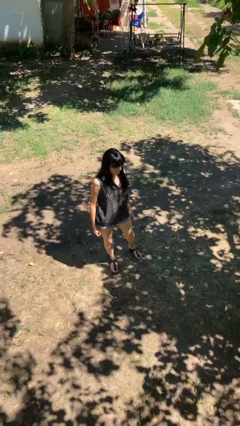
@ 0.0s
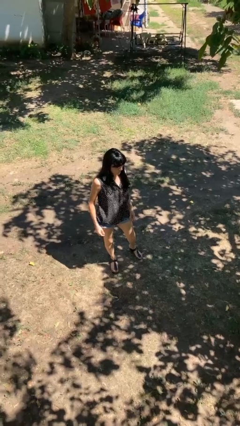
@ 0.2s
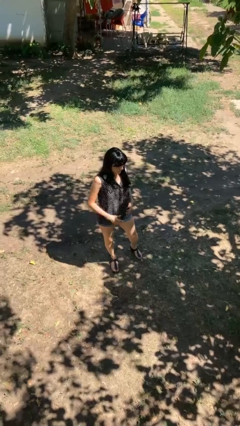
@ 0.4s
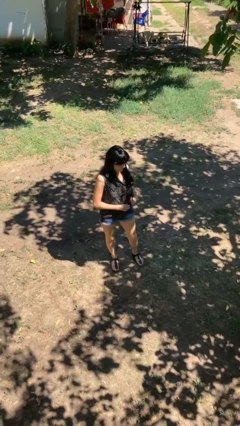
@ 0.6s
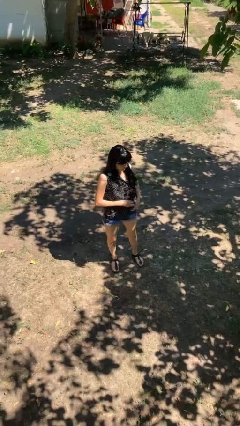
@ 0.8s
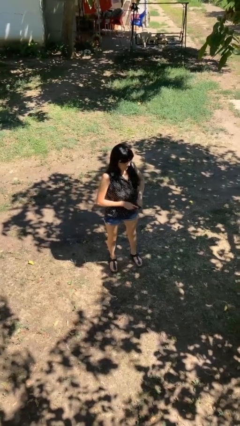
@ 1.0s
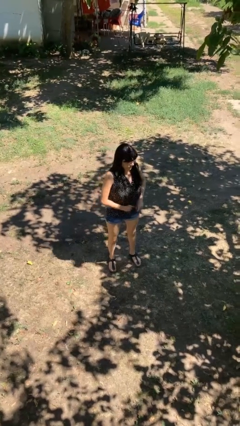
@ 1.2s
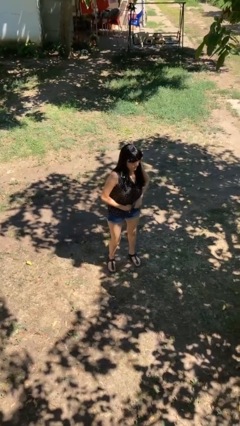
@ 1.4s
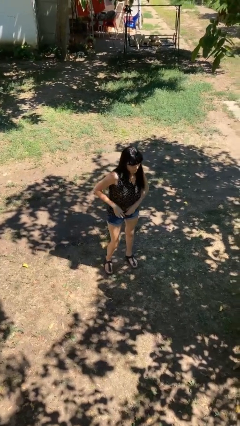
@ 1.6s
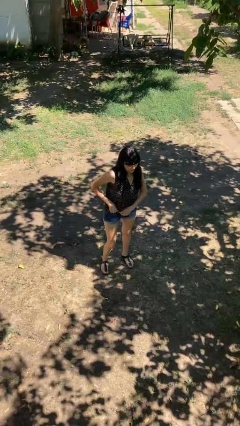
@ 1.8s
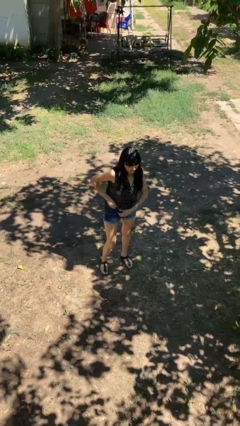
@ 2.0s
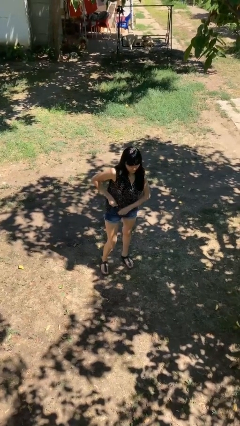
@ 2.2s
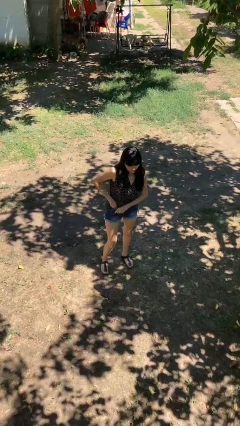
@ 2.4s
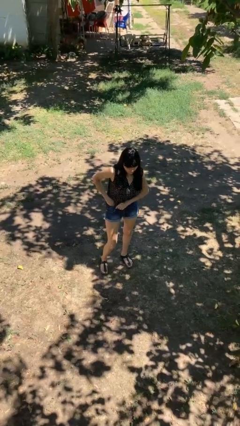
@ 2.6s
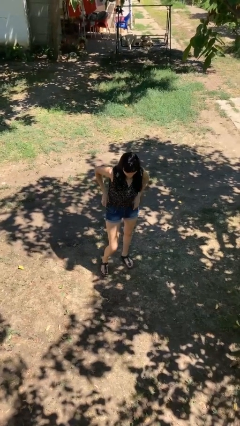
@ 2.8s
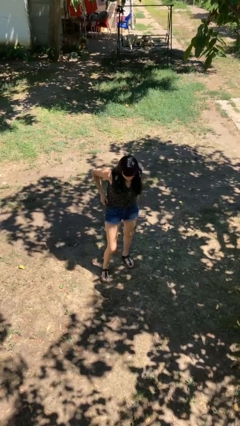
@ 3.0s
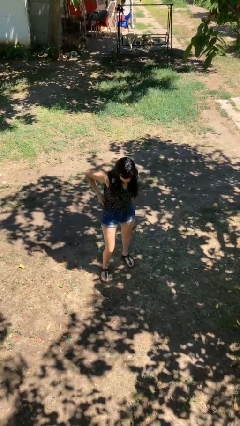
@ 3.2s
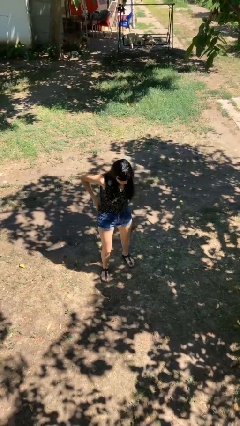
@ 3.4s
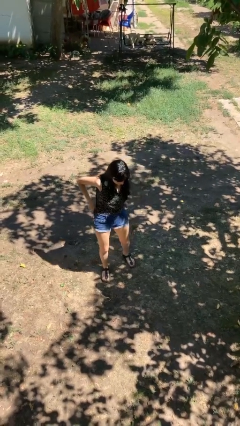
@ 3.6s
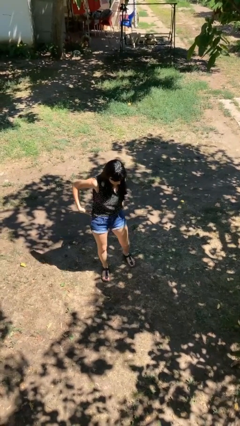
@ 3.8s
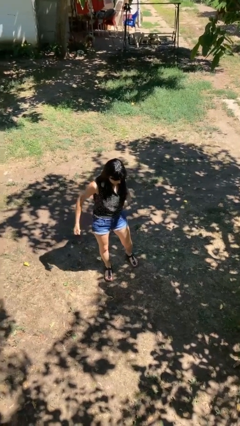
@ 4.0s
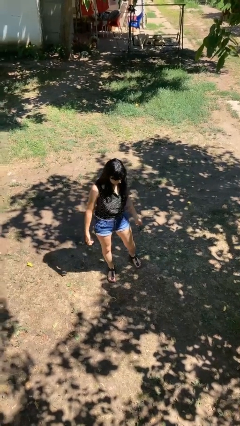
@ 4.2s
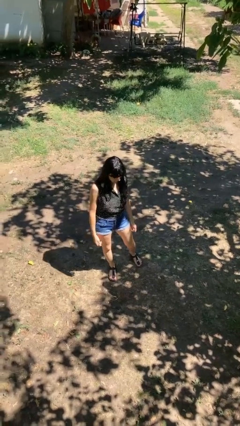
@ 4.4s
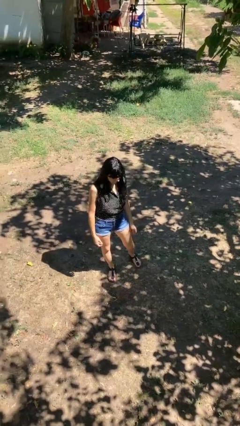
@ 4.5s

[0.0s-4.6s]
person tucks in shirt

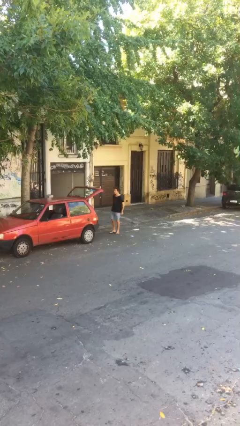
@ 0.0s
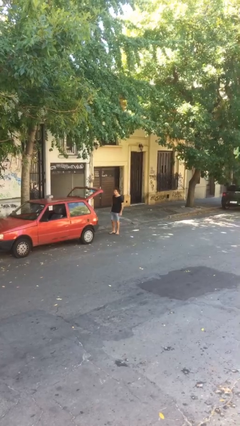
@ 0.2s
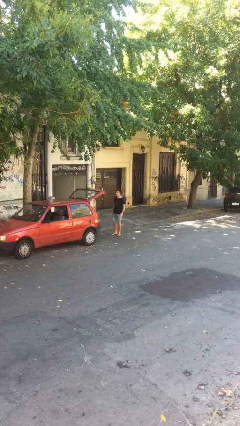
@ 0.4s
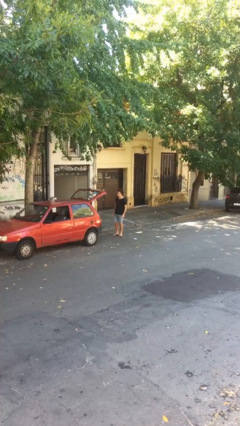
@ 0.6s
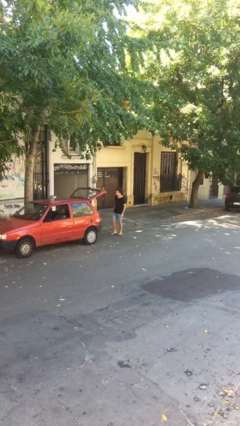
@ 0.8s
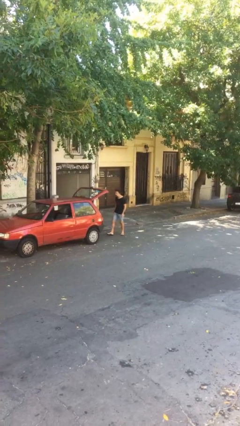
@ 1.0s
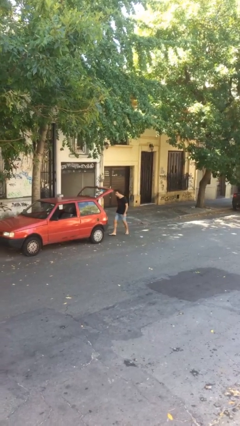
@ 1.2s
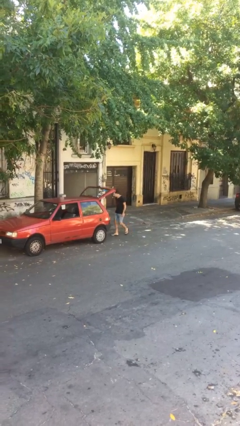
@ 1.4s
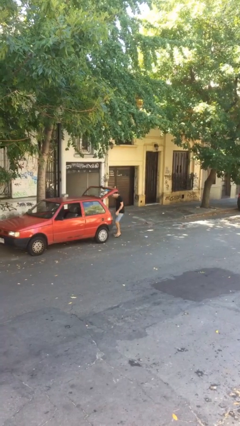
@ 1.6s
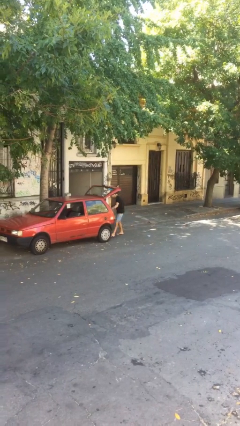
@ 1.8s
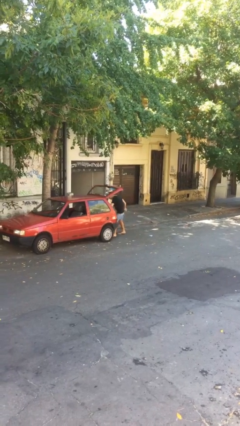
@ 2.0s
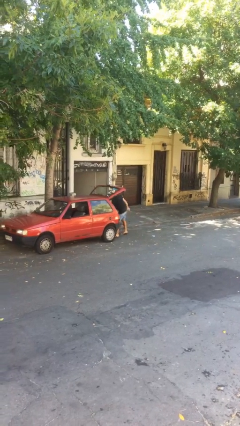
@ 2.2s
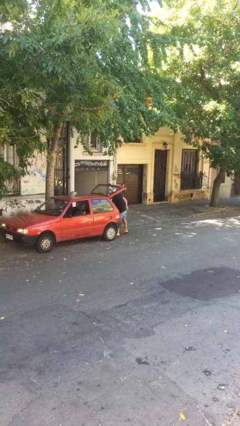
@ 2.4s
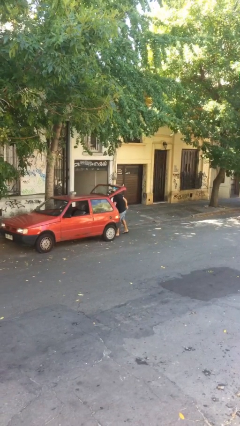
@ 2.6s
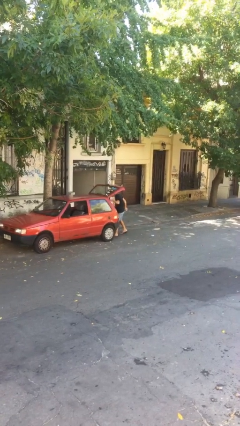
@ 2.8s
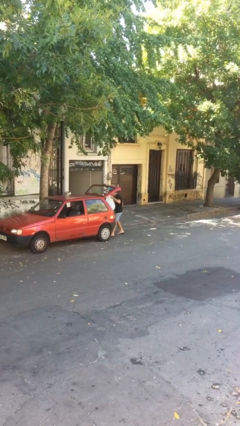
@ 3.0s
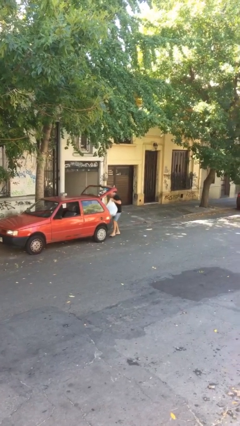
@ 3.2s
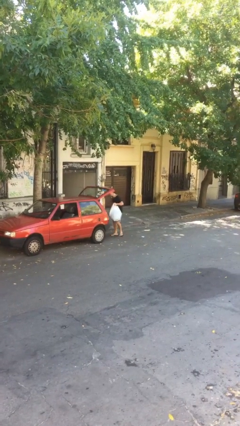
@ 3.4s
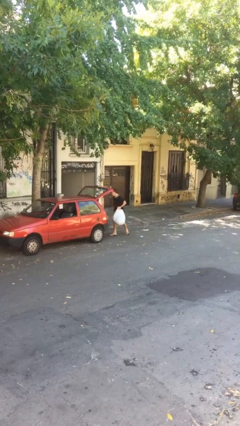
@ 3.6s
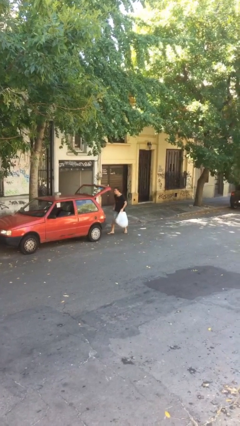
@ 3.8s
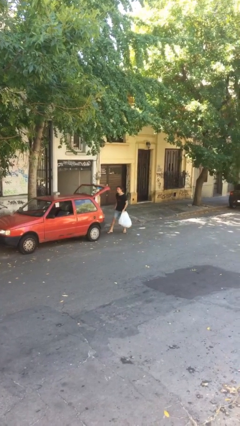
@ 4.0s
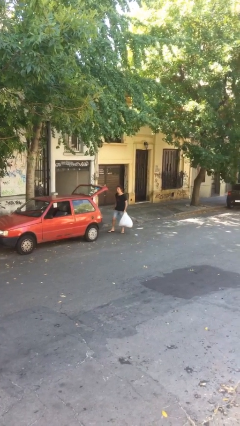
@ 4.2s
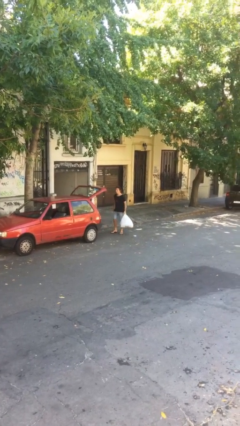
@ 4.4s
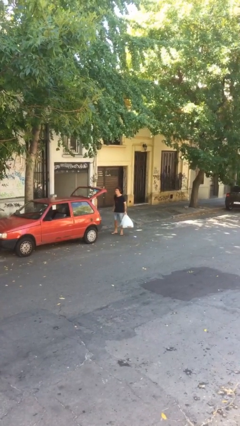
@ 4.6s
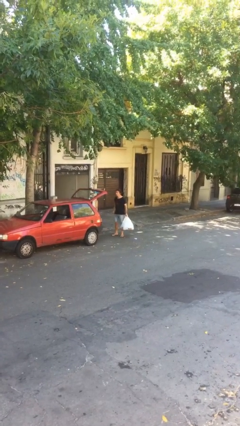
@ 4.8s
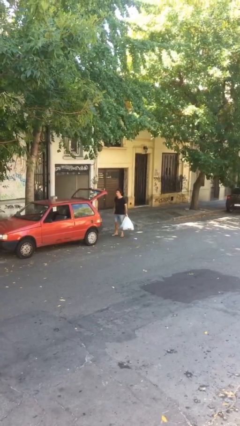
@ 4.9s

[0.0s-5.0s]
person unloads car

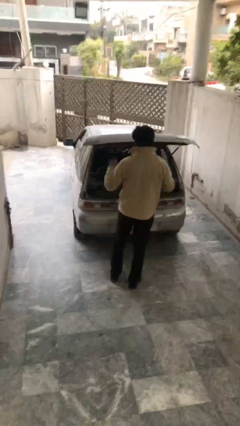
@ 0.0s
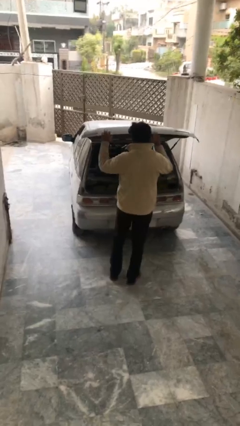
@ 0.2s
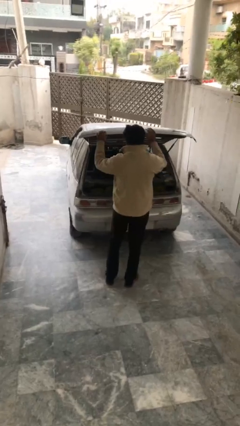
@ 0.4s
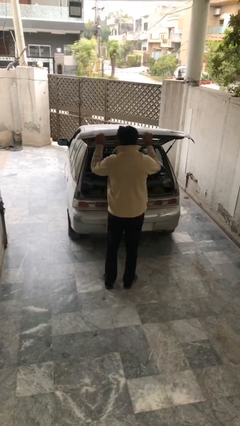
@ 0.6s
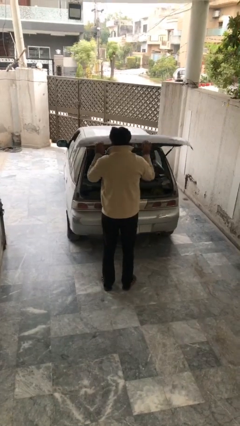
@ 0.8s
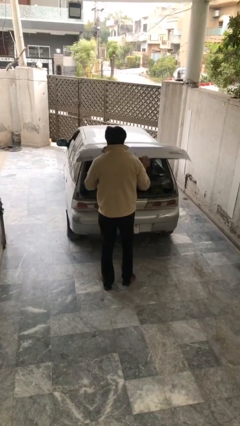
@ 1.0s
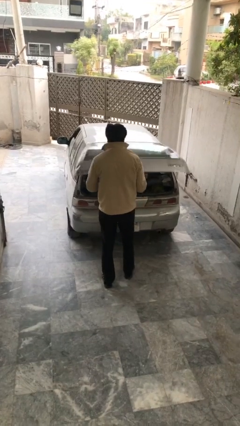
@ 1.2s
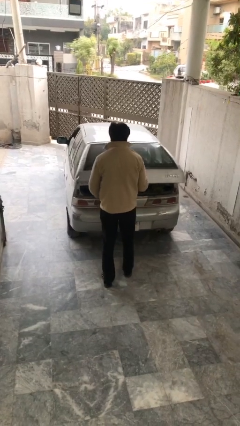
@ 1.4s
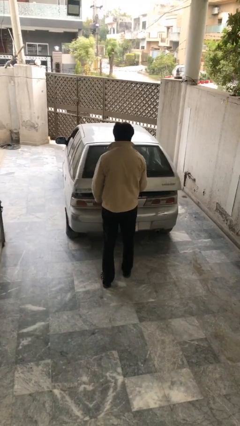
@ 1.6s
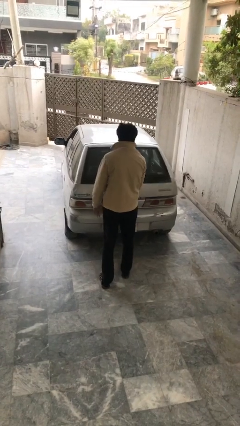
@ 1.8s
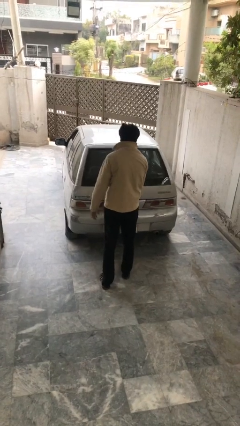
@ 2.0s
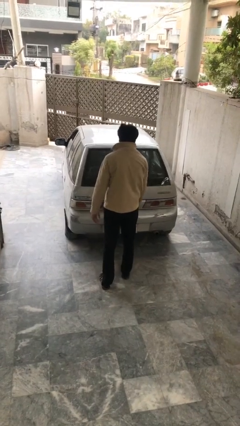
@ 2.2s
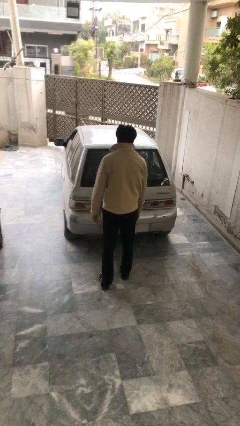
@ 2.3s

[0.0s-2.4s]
person closes car trunk

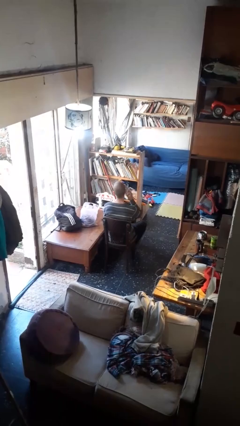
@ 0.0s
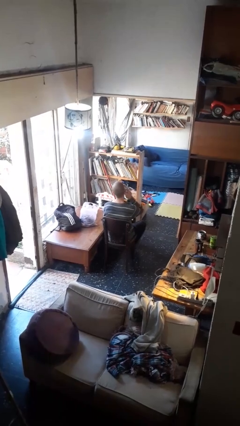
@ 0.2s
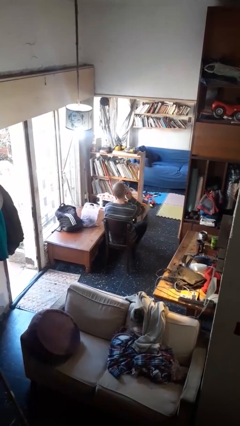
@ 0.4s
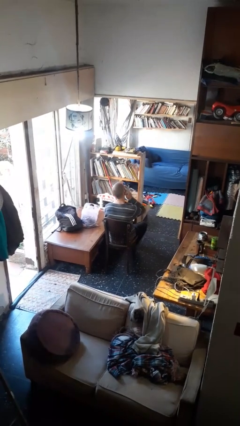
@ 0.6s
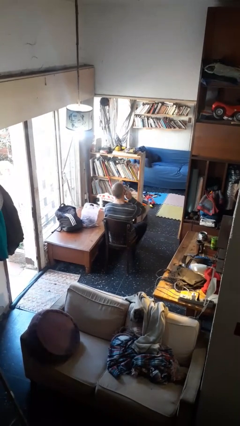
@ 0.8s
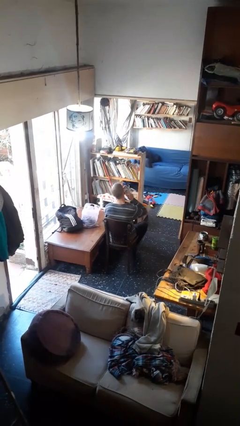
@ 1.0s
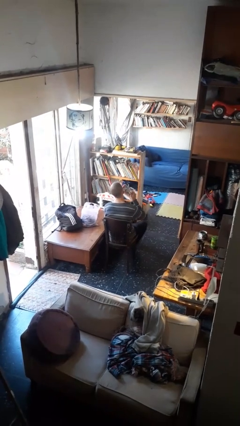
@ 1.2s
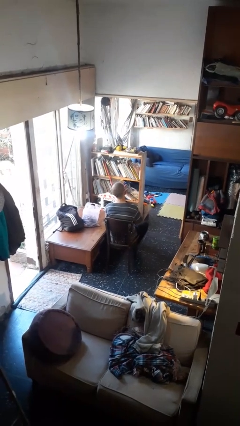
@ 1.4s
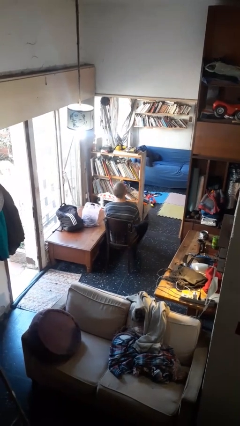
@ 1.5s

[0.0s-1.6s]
person takes off earrings

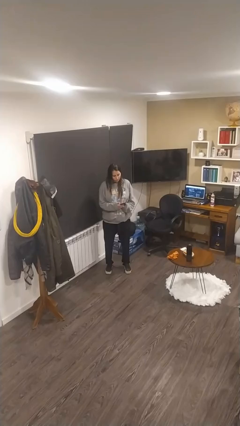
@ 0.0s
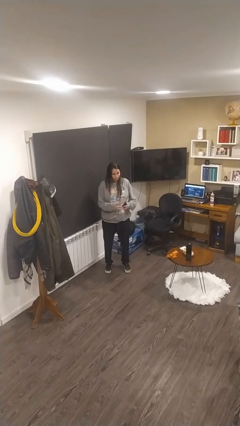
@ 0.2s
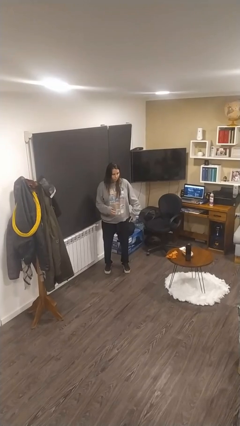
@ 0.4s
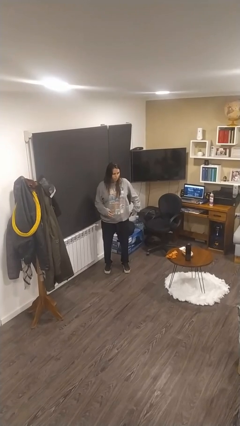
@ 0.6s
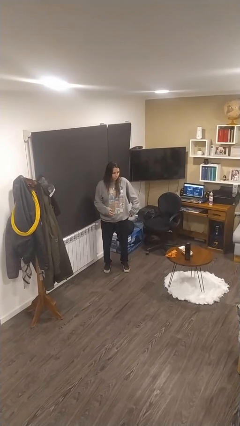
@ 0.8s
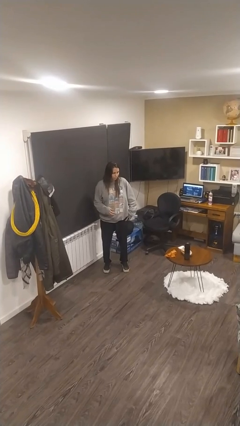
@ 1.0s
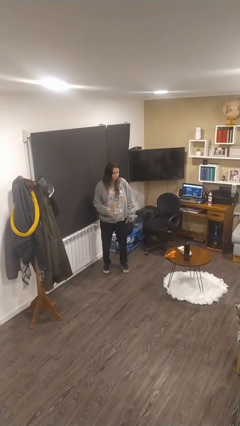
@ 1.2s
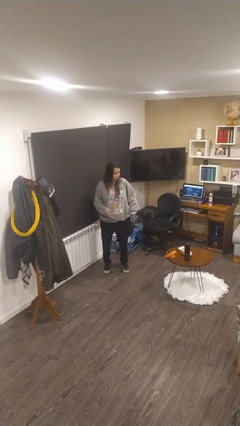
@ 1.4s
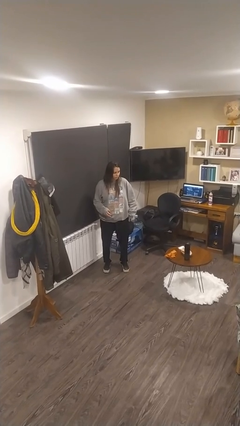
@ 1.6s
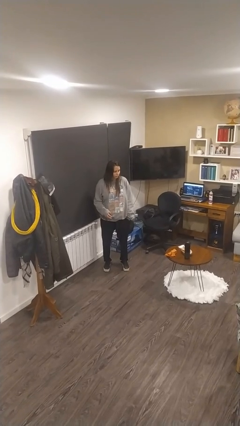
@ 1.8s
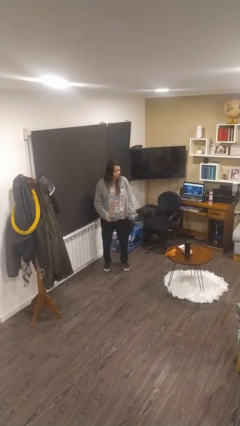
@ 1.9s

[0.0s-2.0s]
person puts phone into pocket

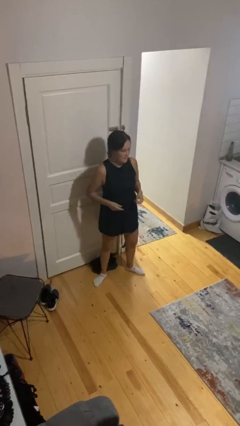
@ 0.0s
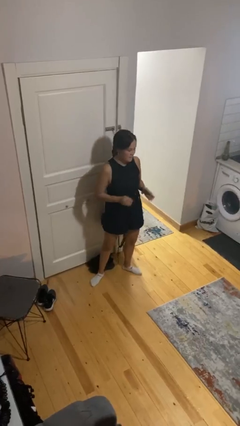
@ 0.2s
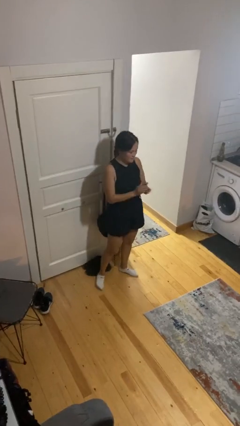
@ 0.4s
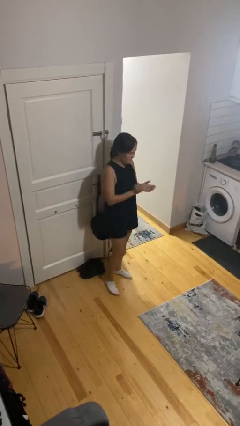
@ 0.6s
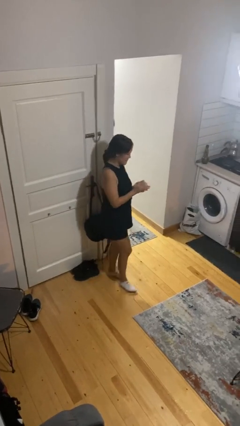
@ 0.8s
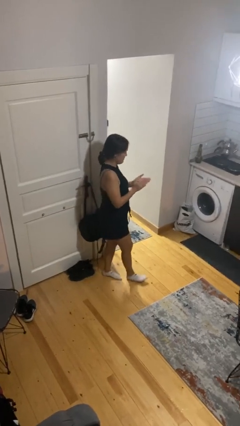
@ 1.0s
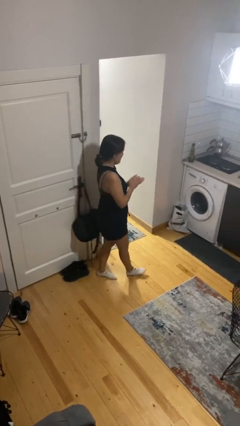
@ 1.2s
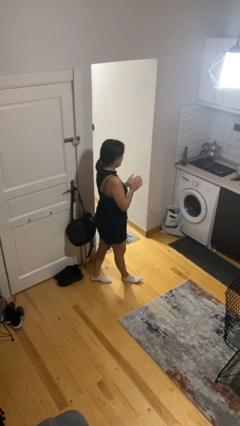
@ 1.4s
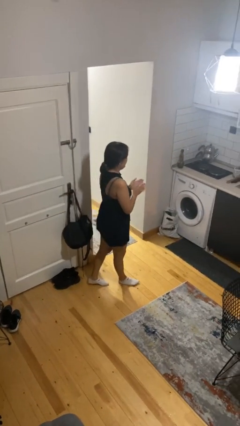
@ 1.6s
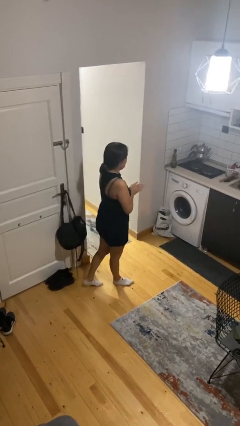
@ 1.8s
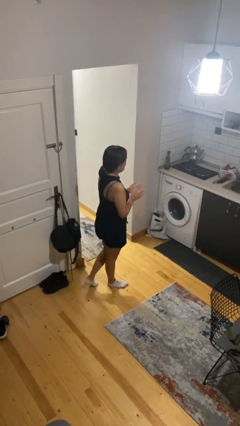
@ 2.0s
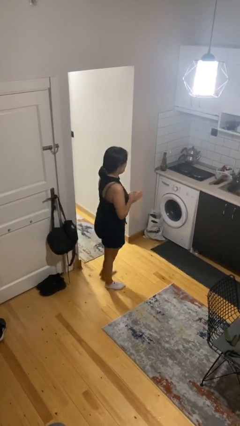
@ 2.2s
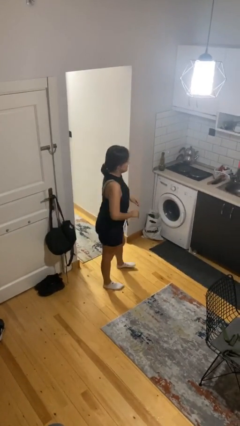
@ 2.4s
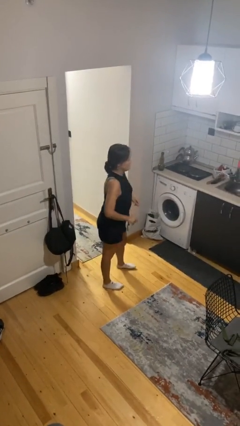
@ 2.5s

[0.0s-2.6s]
person claps hands
